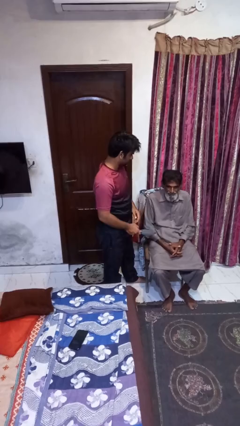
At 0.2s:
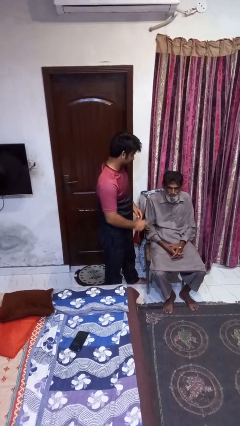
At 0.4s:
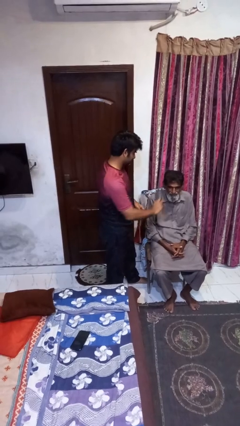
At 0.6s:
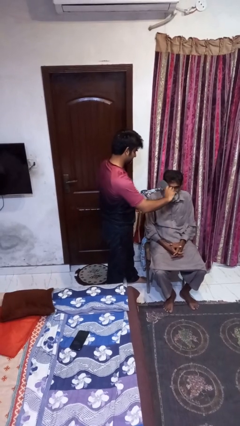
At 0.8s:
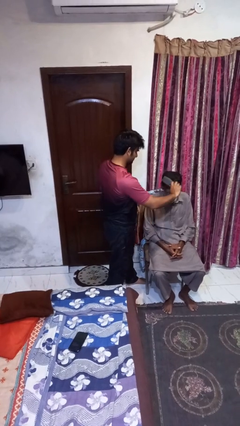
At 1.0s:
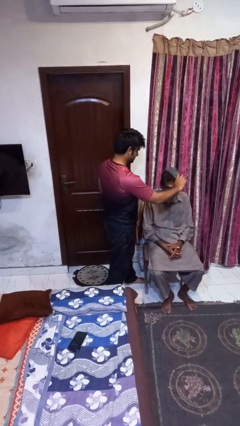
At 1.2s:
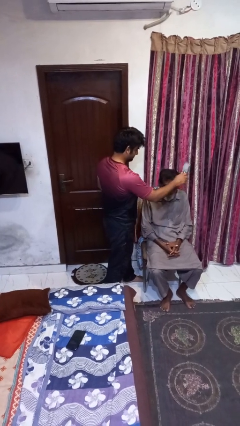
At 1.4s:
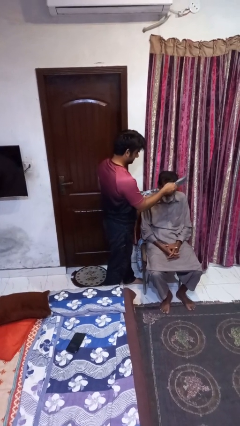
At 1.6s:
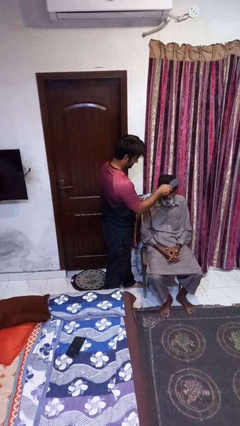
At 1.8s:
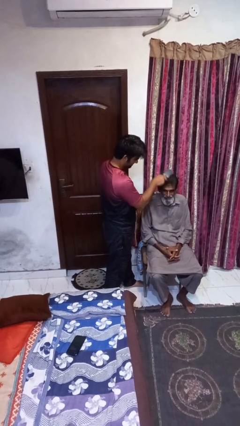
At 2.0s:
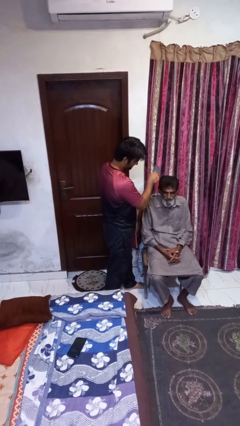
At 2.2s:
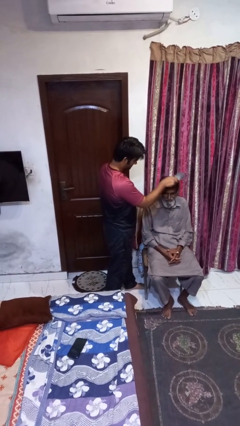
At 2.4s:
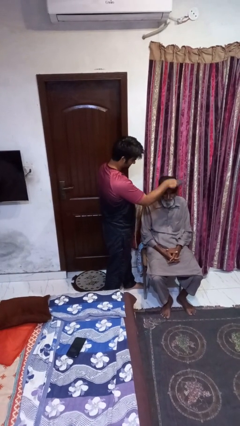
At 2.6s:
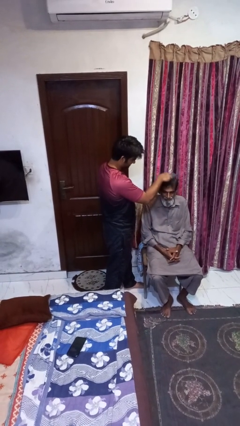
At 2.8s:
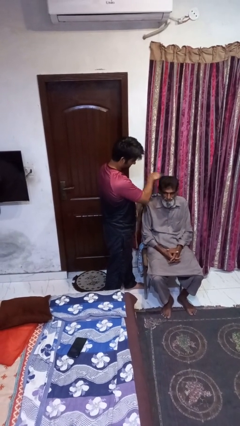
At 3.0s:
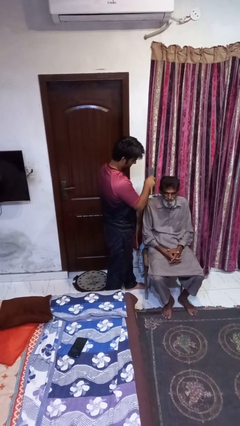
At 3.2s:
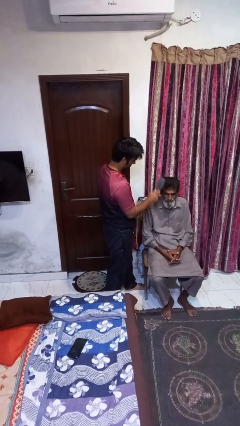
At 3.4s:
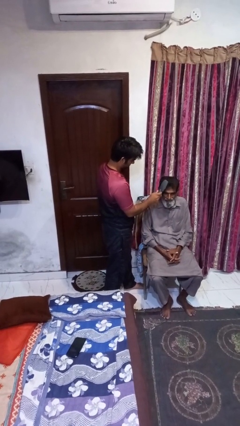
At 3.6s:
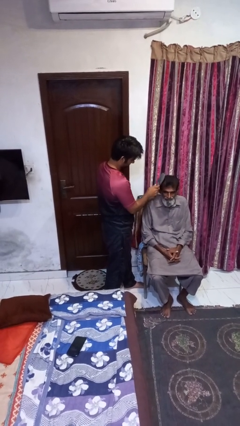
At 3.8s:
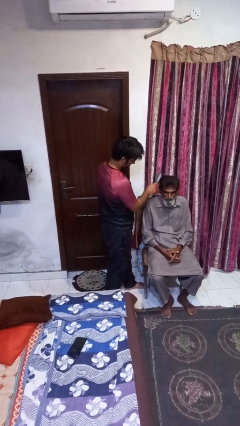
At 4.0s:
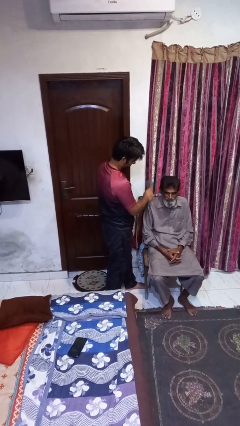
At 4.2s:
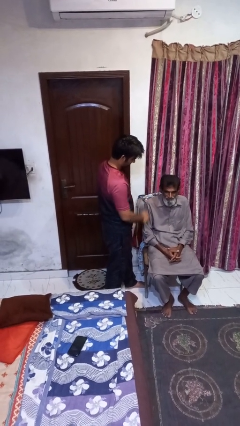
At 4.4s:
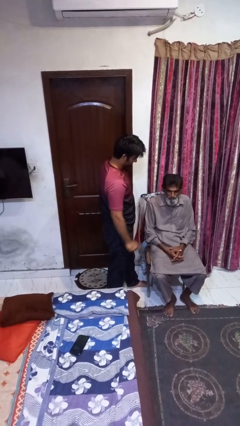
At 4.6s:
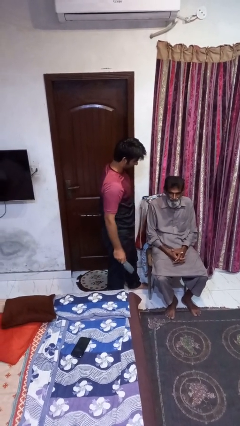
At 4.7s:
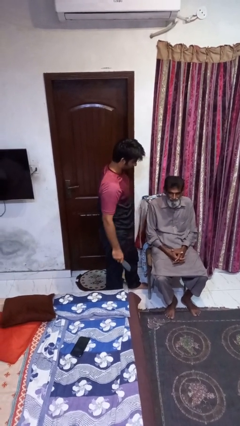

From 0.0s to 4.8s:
person brushes hair of person

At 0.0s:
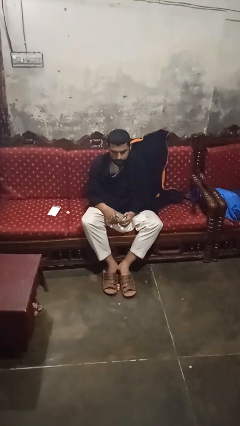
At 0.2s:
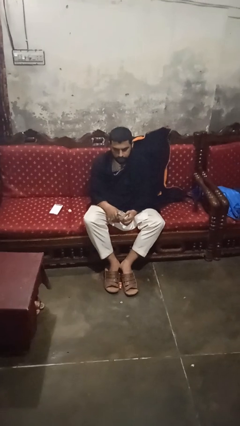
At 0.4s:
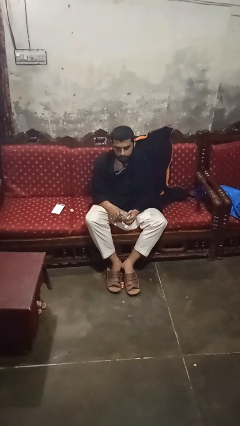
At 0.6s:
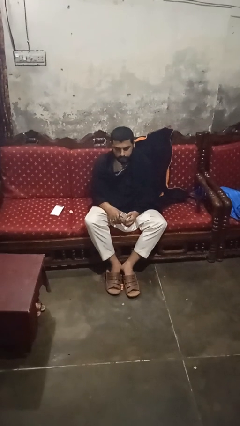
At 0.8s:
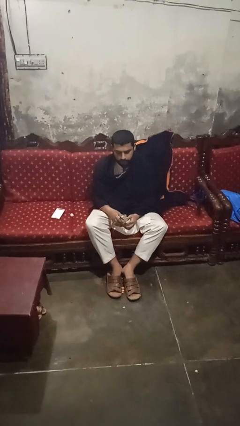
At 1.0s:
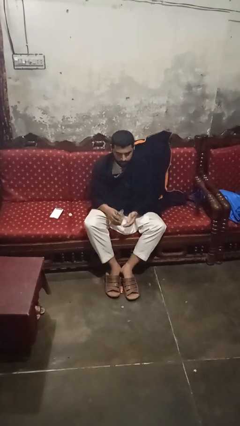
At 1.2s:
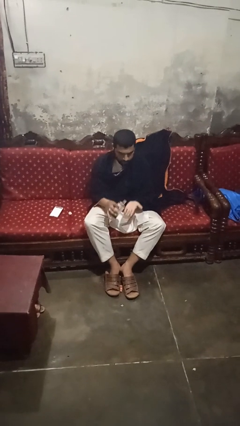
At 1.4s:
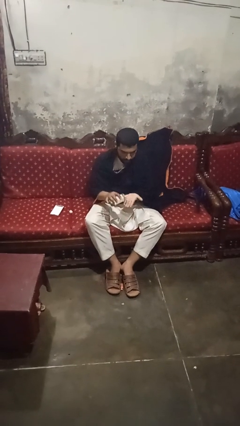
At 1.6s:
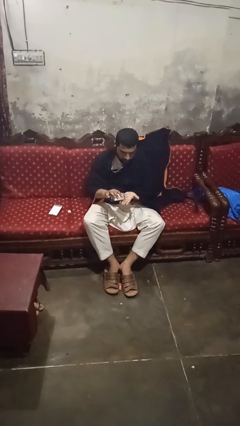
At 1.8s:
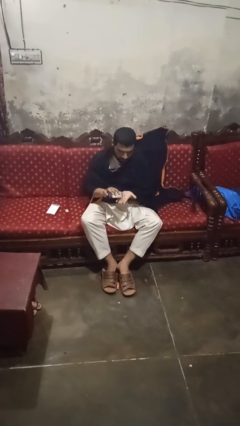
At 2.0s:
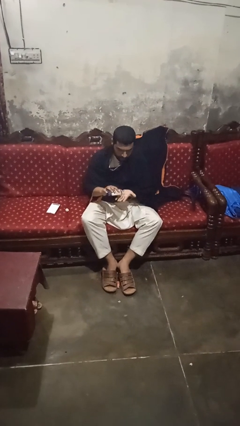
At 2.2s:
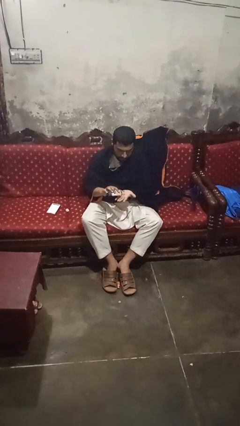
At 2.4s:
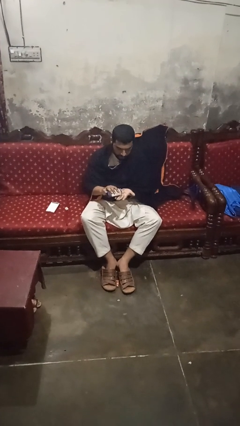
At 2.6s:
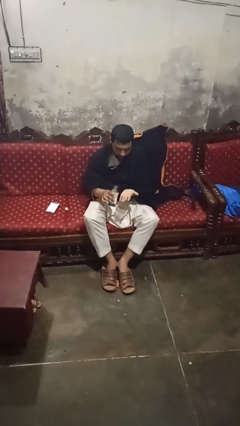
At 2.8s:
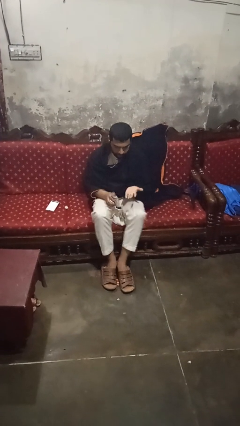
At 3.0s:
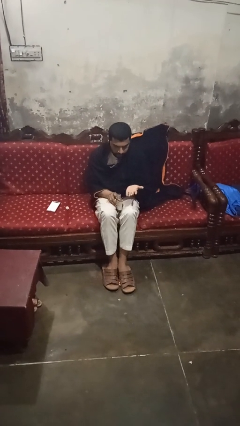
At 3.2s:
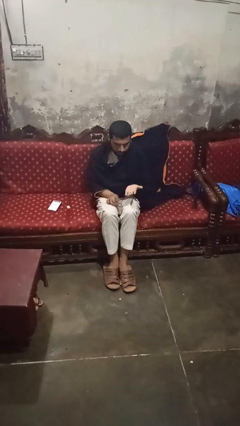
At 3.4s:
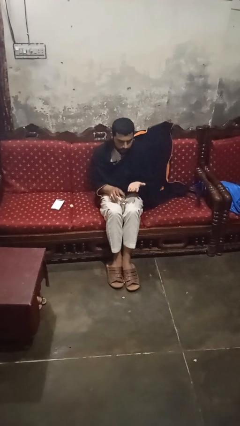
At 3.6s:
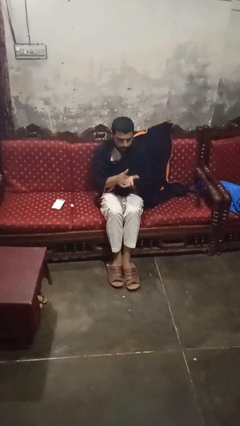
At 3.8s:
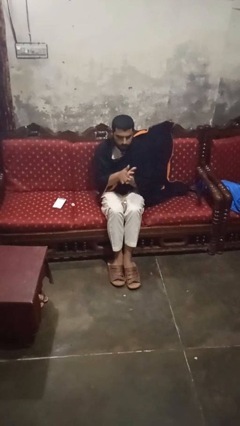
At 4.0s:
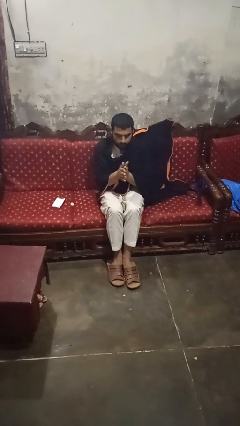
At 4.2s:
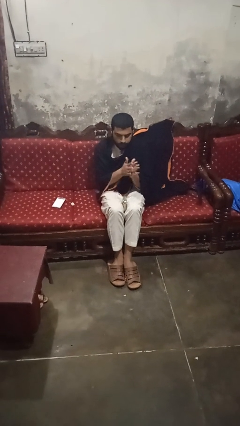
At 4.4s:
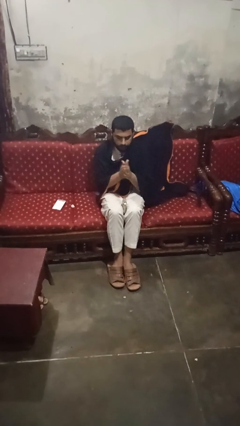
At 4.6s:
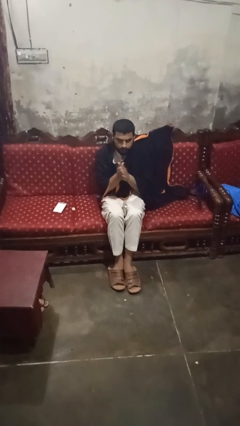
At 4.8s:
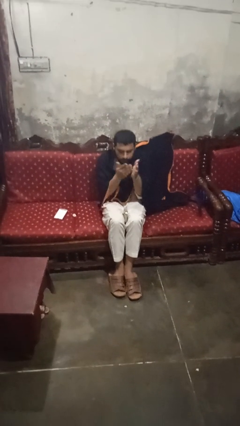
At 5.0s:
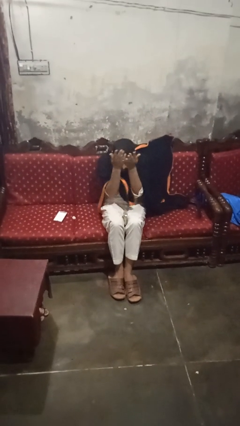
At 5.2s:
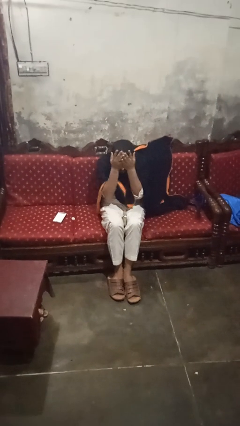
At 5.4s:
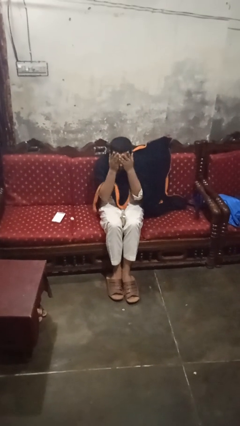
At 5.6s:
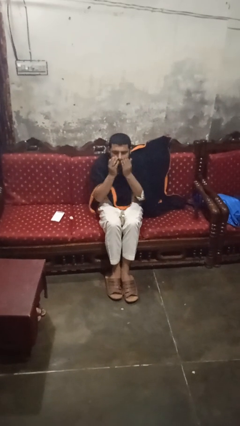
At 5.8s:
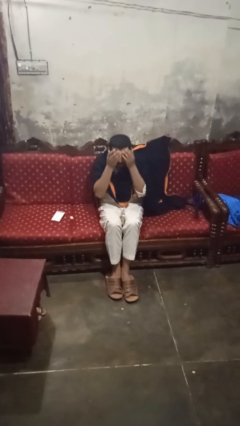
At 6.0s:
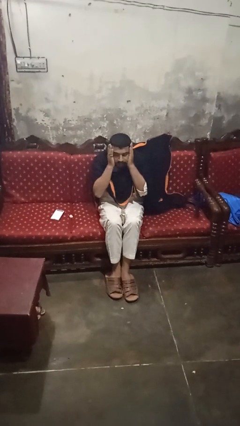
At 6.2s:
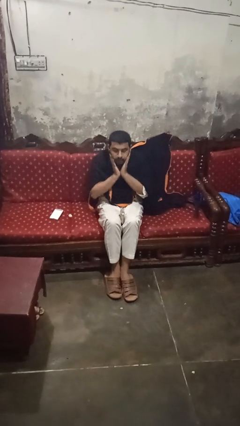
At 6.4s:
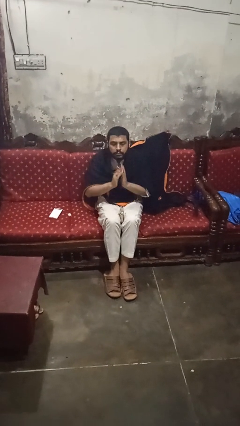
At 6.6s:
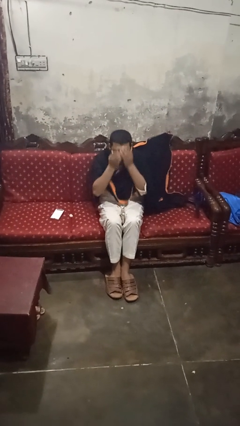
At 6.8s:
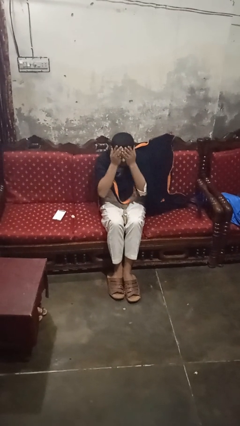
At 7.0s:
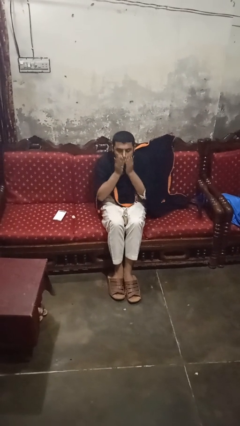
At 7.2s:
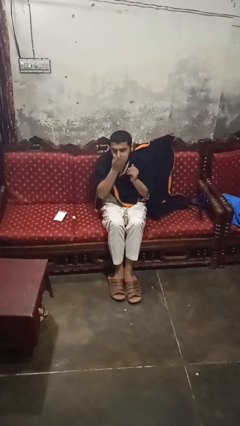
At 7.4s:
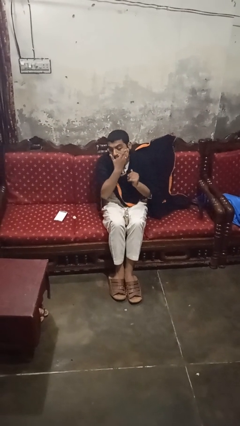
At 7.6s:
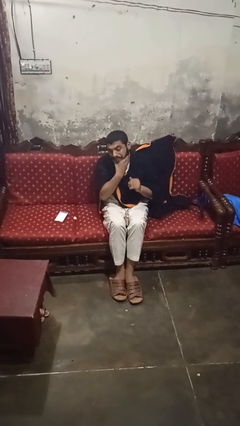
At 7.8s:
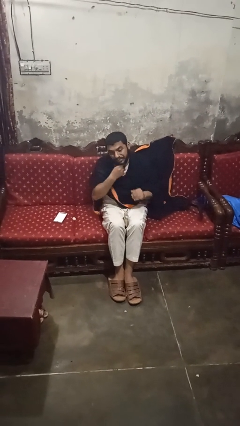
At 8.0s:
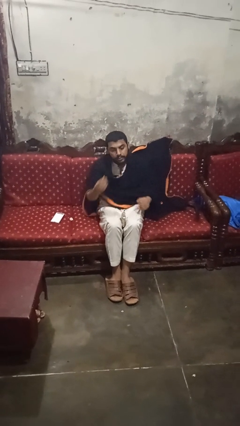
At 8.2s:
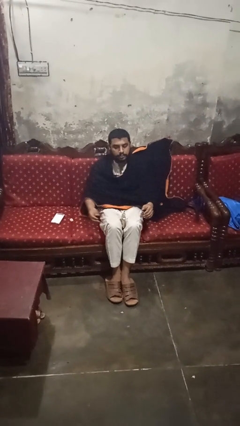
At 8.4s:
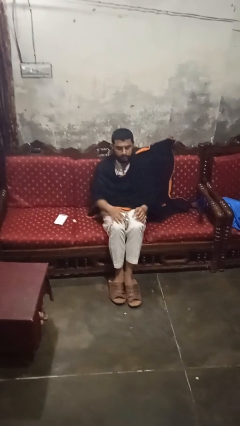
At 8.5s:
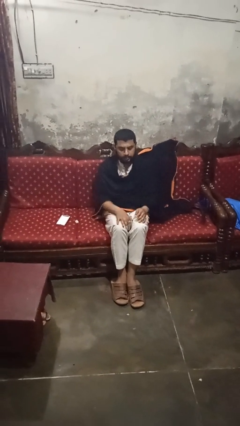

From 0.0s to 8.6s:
person applies facial moisturizer

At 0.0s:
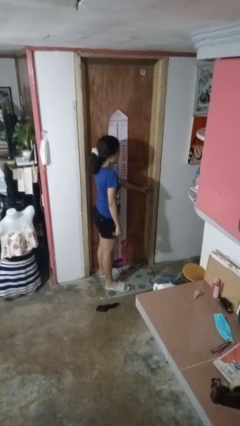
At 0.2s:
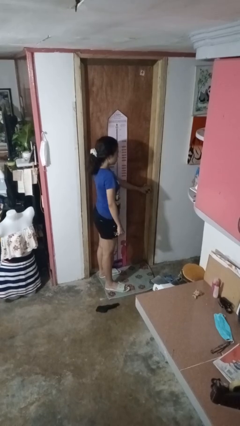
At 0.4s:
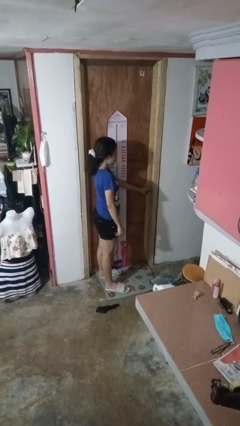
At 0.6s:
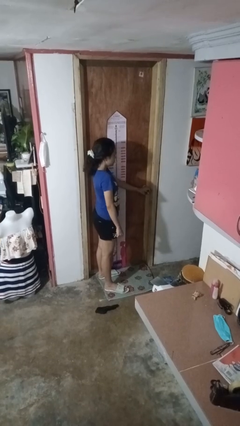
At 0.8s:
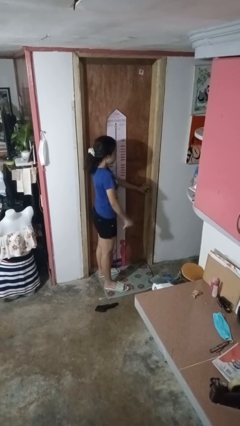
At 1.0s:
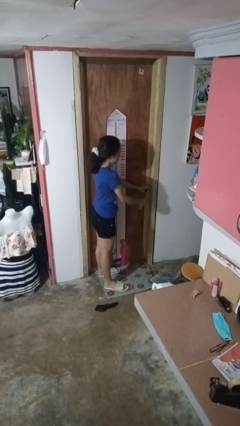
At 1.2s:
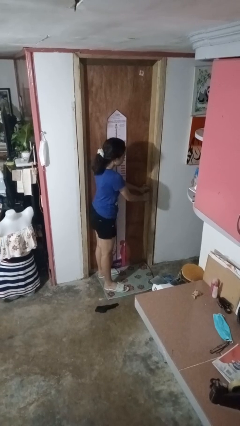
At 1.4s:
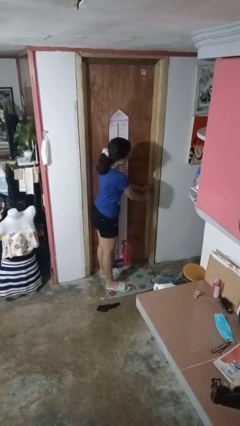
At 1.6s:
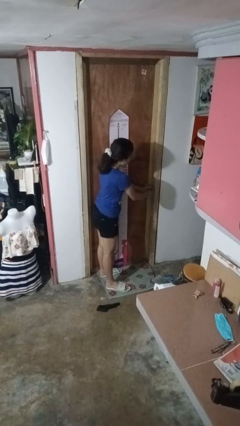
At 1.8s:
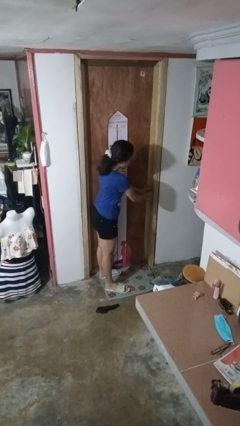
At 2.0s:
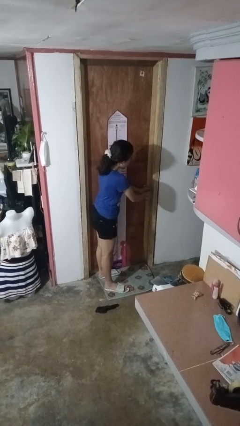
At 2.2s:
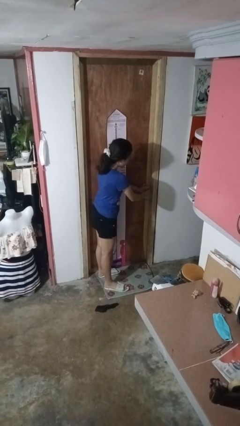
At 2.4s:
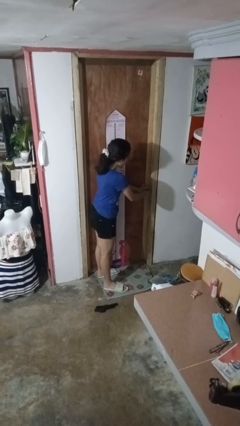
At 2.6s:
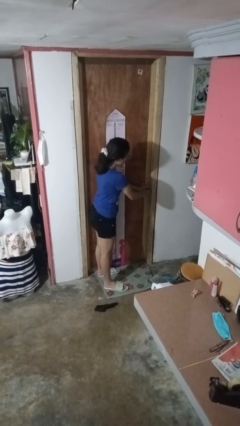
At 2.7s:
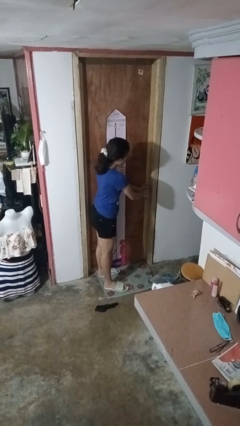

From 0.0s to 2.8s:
person locks door with keys

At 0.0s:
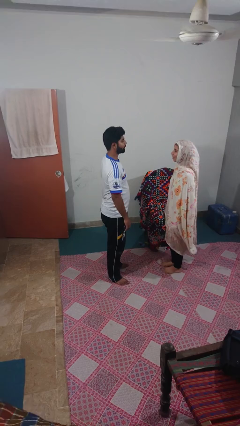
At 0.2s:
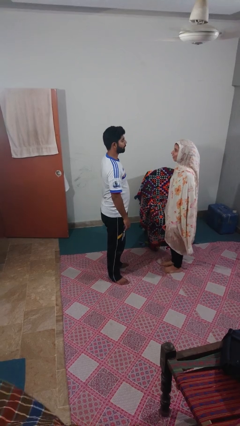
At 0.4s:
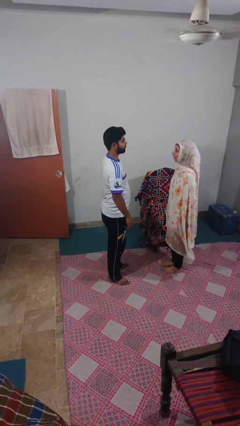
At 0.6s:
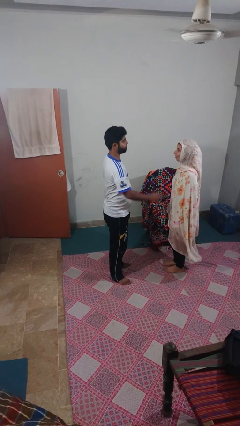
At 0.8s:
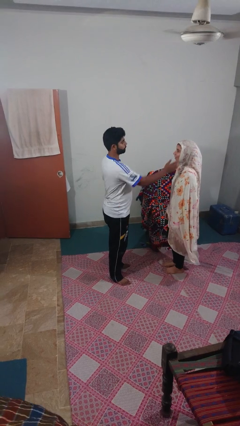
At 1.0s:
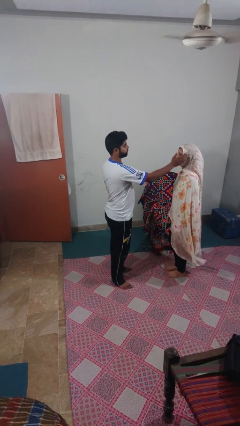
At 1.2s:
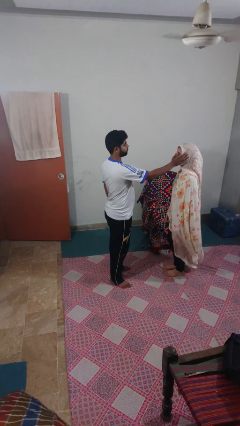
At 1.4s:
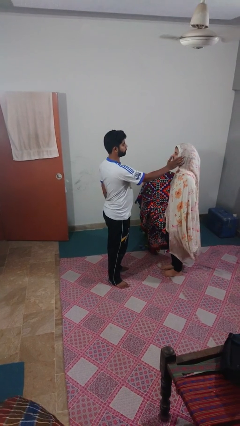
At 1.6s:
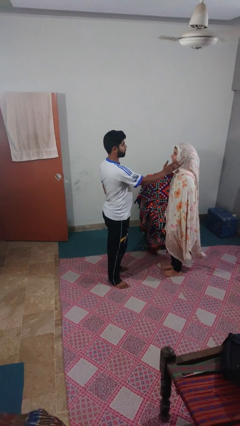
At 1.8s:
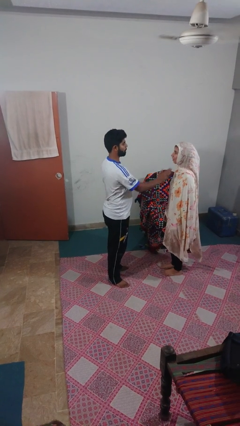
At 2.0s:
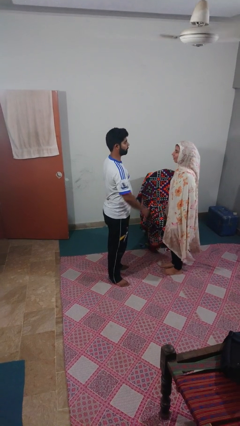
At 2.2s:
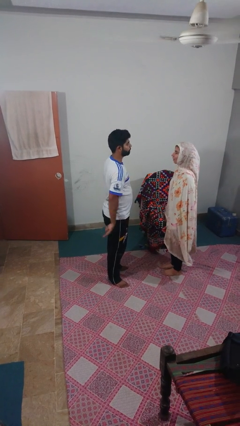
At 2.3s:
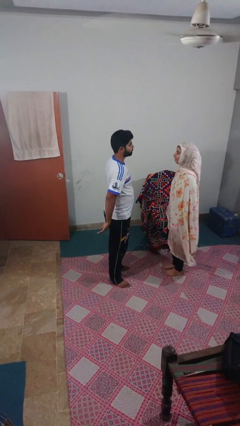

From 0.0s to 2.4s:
person touches face of person
